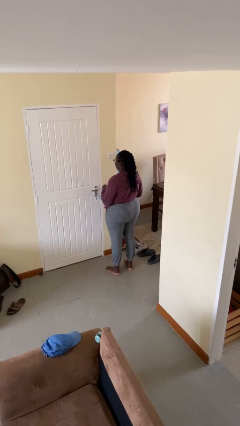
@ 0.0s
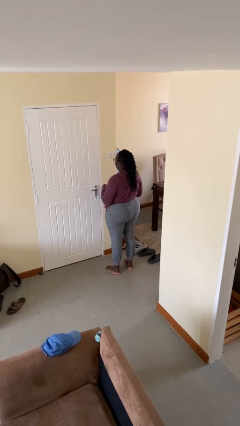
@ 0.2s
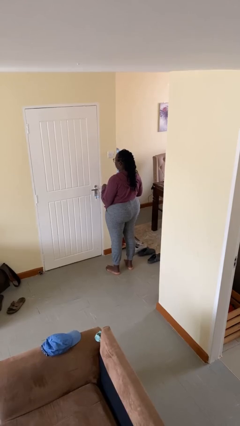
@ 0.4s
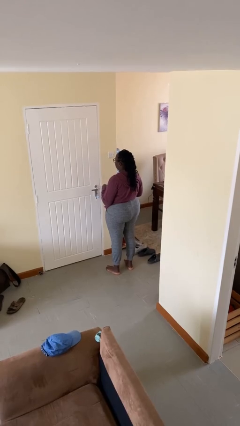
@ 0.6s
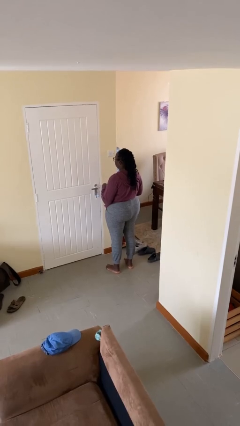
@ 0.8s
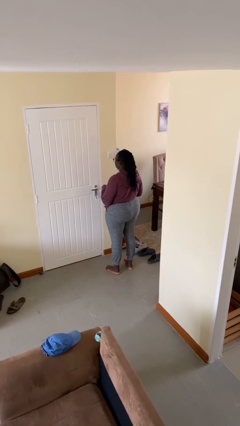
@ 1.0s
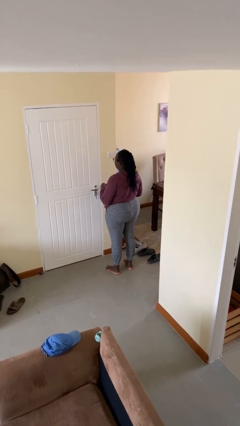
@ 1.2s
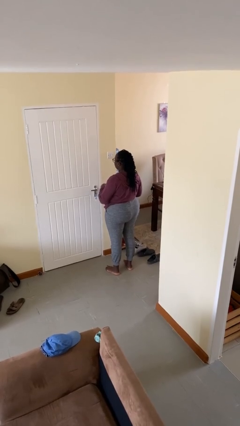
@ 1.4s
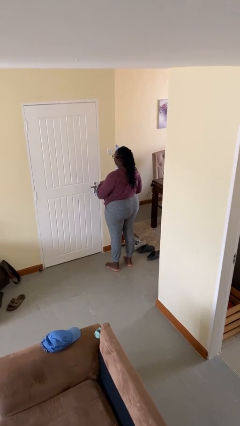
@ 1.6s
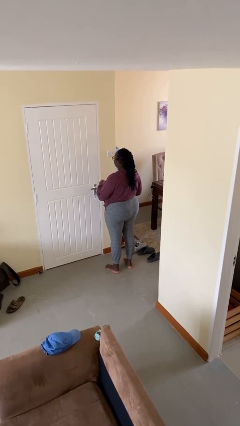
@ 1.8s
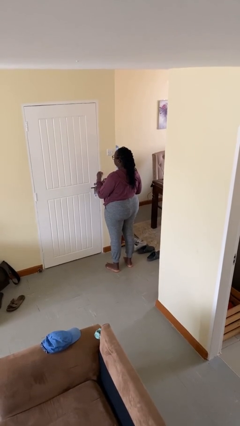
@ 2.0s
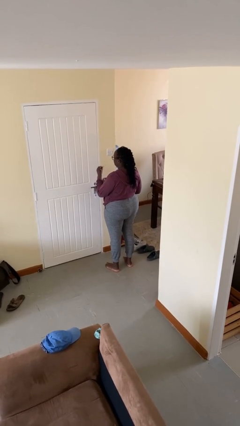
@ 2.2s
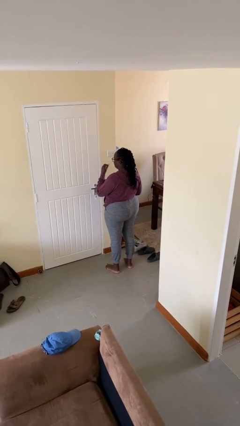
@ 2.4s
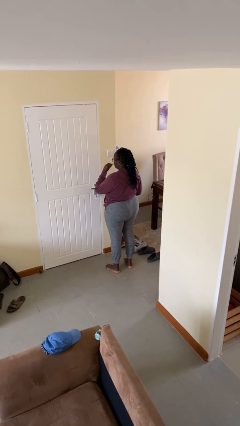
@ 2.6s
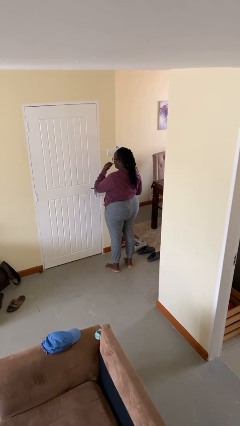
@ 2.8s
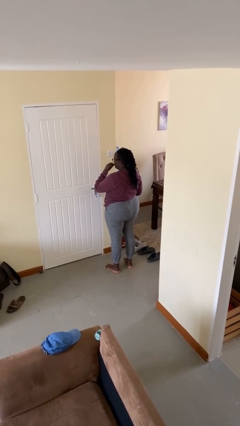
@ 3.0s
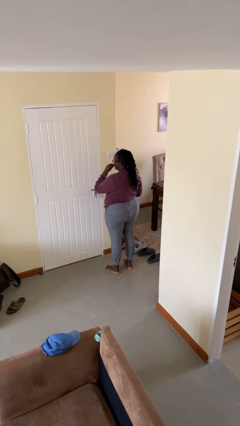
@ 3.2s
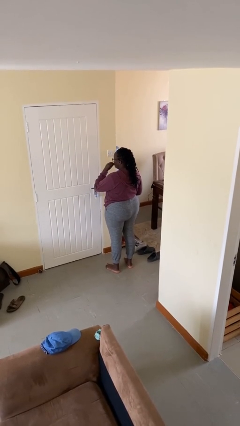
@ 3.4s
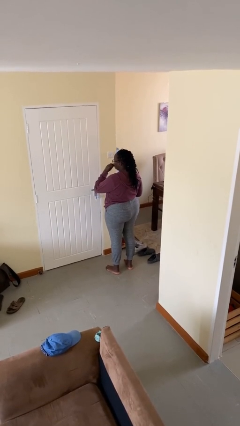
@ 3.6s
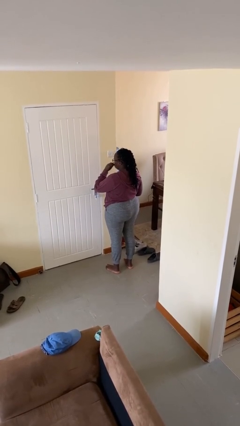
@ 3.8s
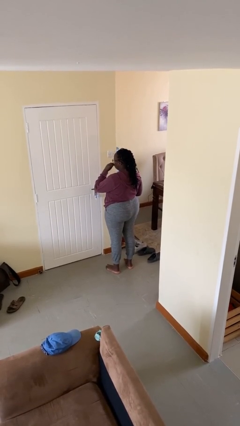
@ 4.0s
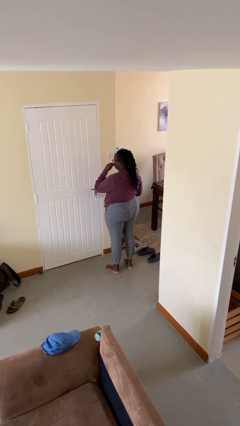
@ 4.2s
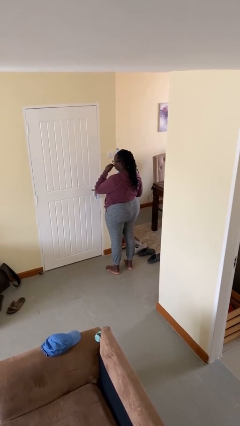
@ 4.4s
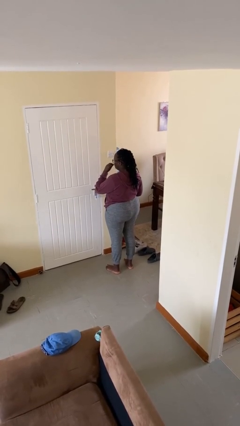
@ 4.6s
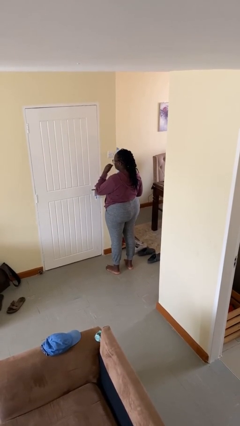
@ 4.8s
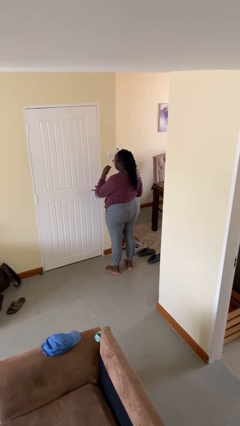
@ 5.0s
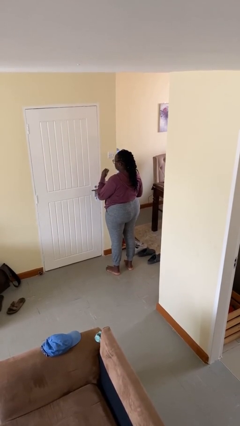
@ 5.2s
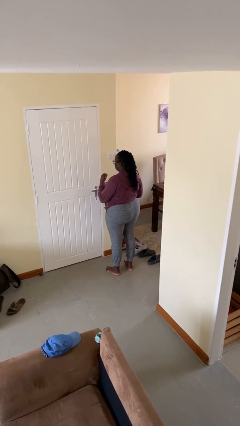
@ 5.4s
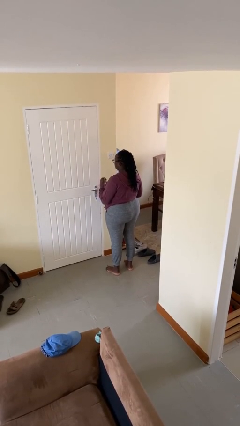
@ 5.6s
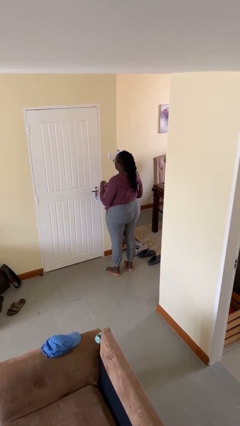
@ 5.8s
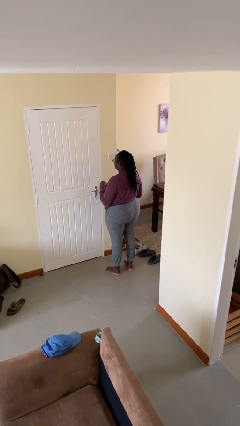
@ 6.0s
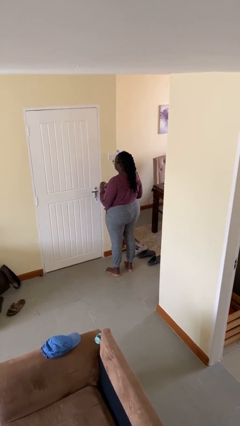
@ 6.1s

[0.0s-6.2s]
person eats snack from bag

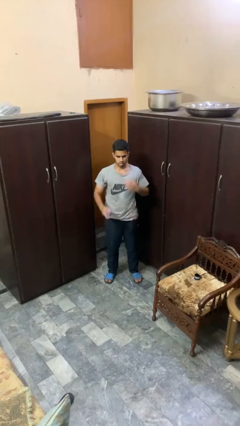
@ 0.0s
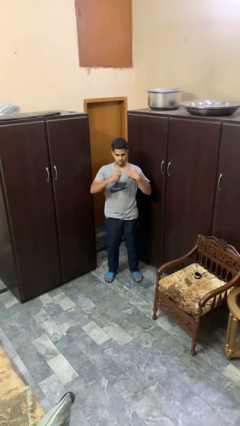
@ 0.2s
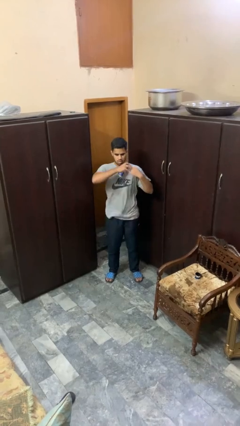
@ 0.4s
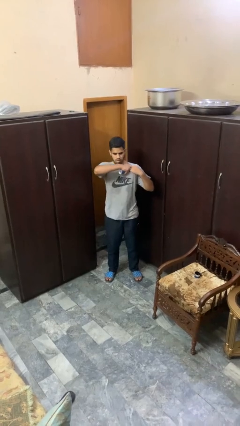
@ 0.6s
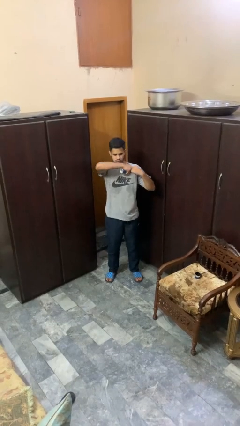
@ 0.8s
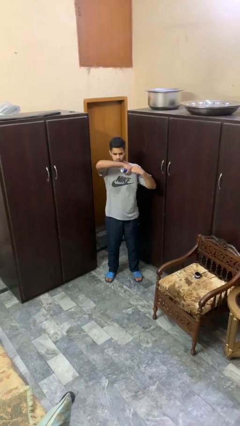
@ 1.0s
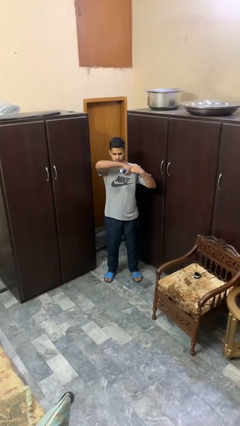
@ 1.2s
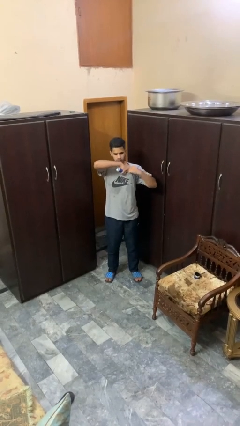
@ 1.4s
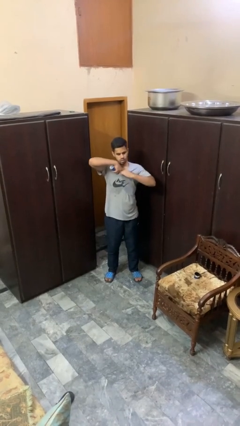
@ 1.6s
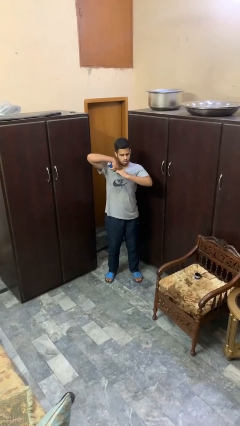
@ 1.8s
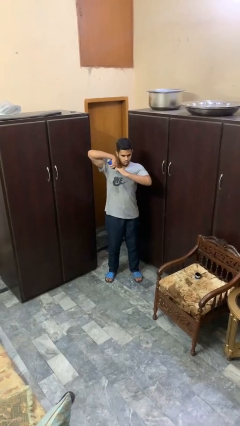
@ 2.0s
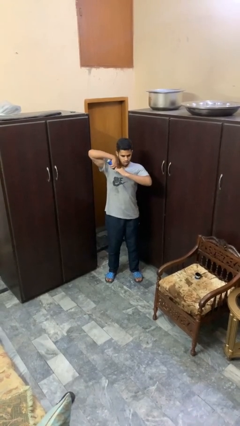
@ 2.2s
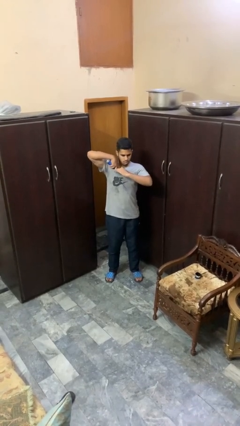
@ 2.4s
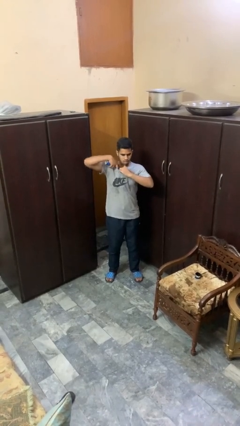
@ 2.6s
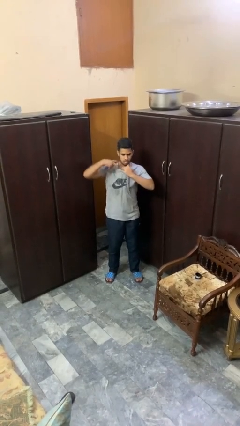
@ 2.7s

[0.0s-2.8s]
person applies deodorant

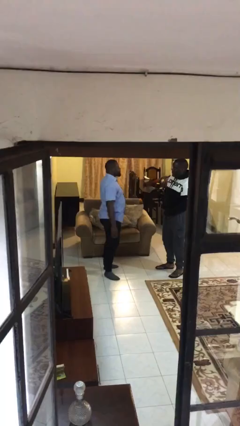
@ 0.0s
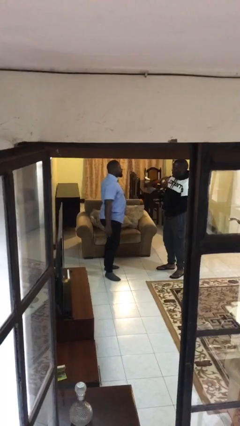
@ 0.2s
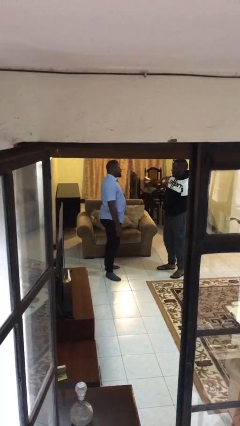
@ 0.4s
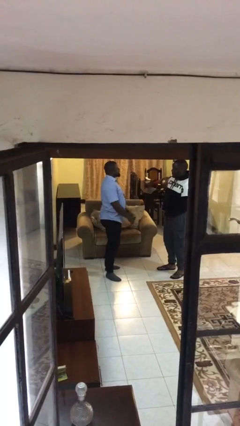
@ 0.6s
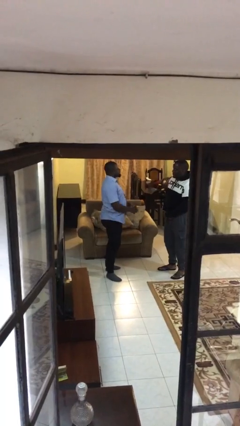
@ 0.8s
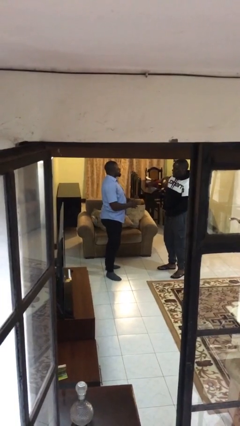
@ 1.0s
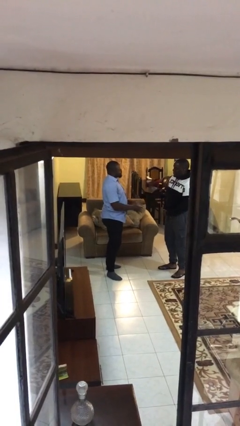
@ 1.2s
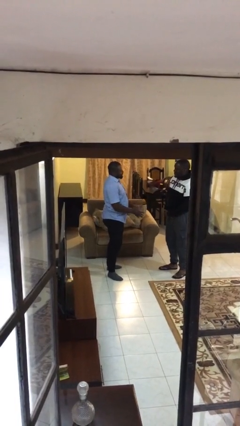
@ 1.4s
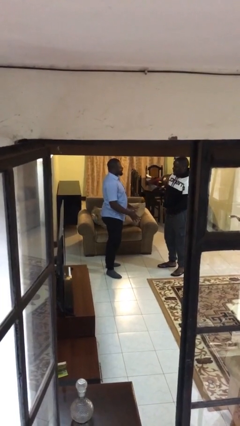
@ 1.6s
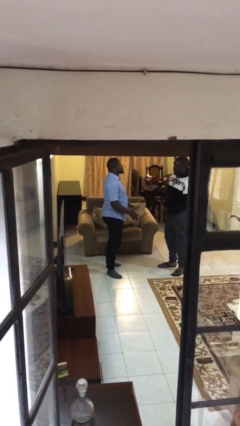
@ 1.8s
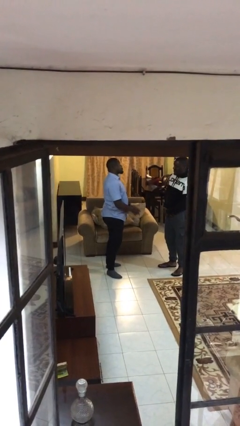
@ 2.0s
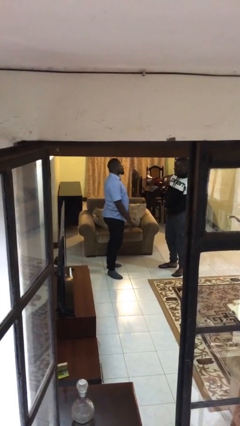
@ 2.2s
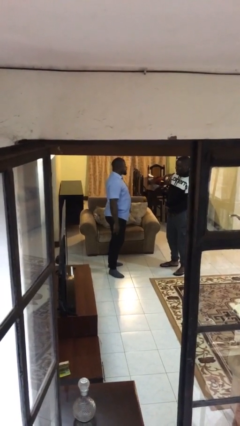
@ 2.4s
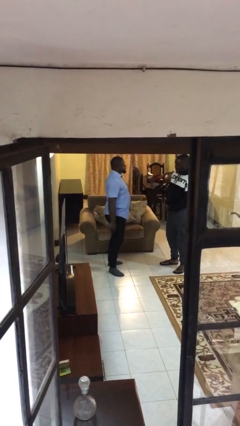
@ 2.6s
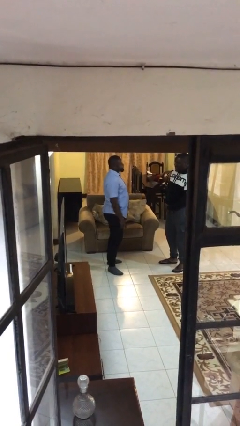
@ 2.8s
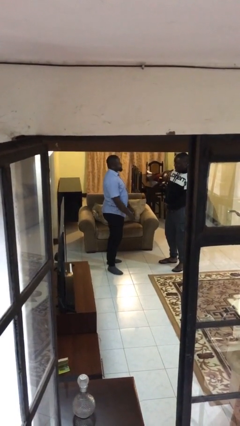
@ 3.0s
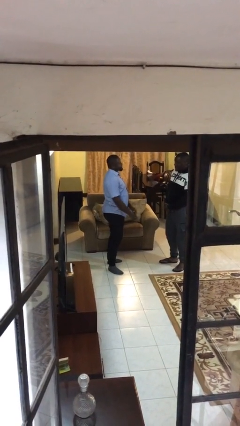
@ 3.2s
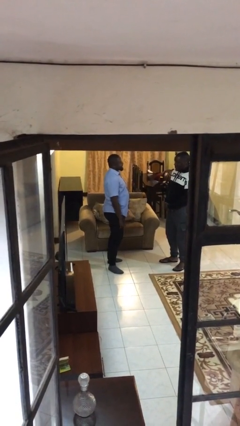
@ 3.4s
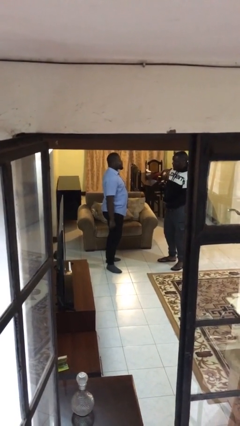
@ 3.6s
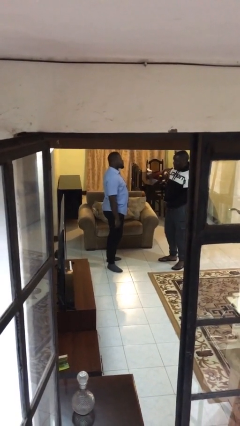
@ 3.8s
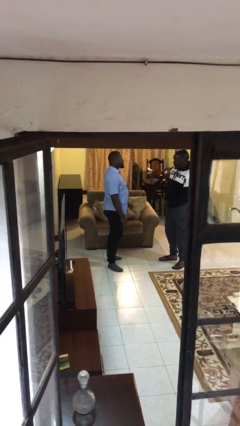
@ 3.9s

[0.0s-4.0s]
person talks to person

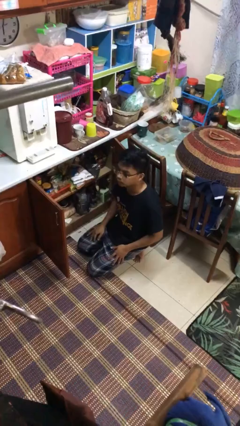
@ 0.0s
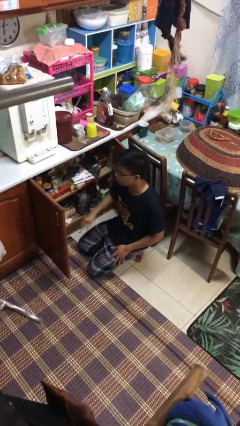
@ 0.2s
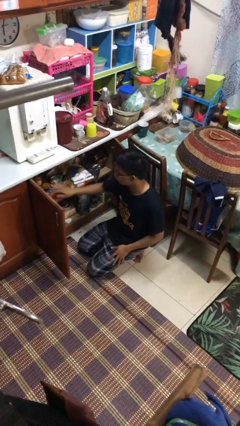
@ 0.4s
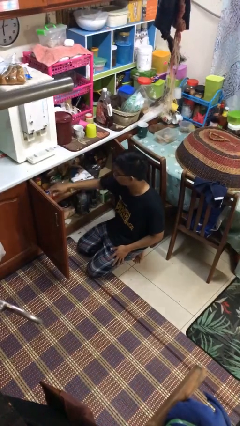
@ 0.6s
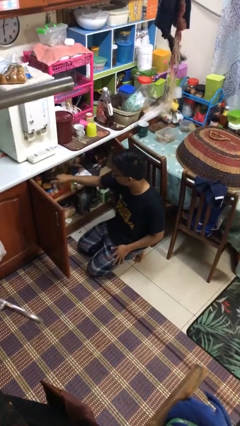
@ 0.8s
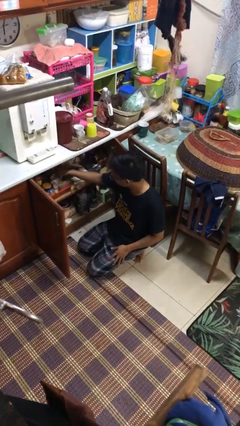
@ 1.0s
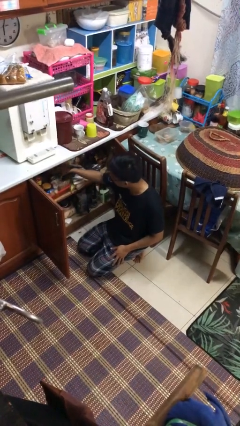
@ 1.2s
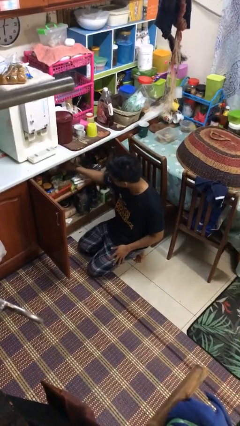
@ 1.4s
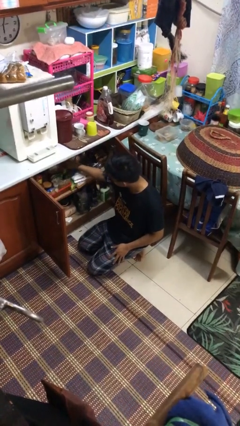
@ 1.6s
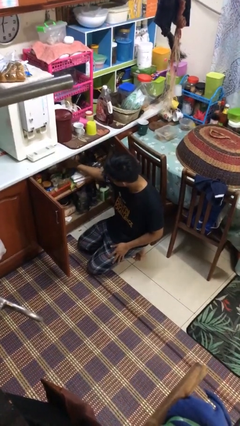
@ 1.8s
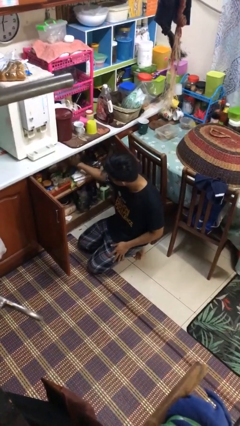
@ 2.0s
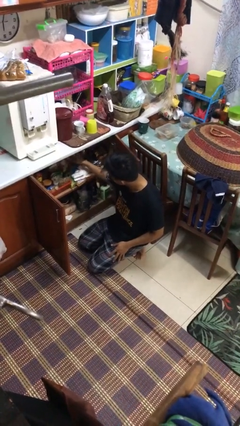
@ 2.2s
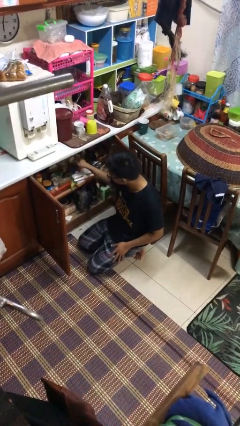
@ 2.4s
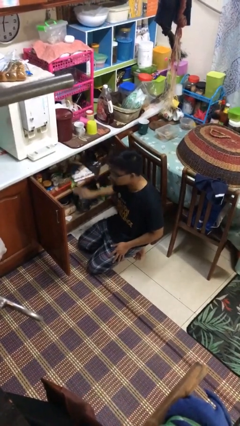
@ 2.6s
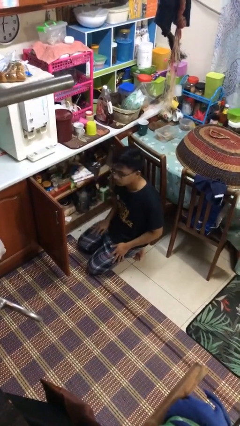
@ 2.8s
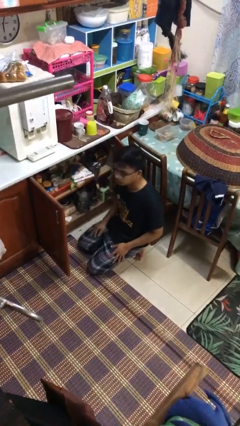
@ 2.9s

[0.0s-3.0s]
person searches in kitchen drawer

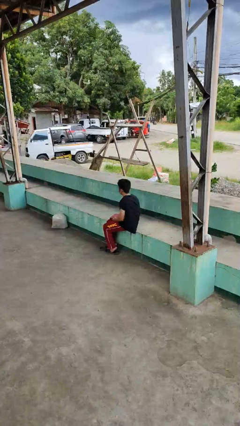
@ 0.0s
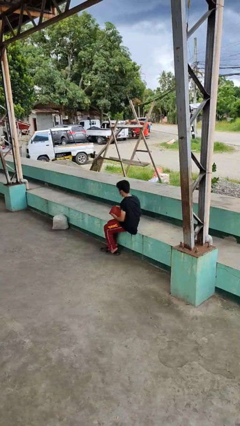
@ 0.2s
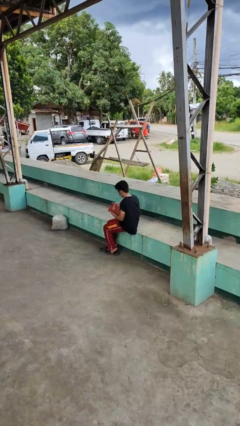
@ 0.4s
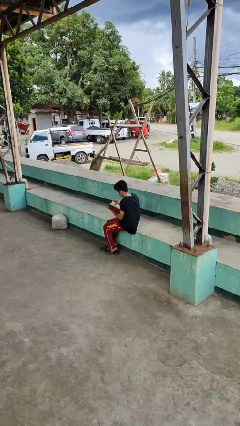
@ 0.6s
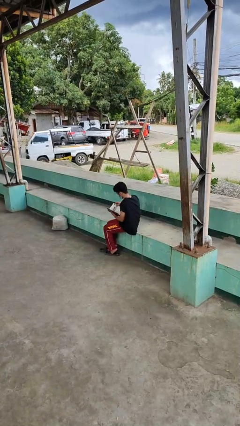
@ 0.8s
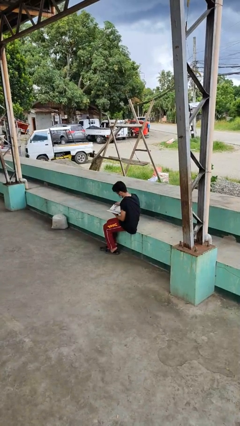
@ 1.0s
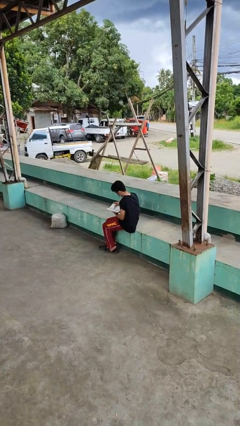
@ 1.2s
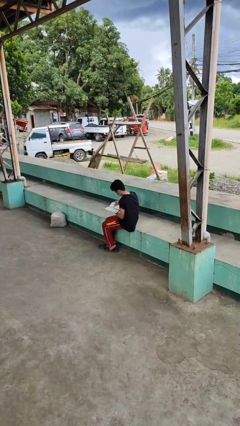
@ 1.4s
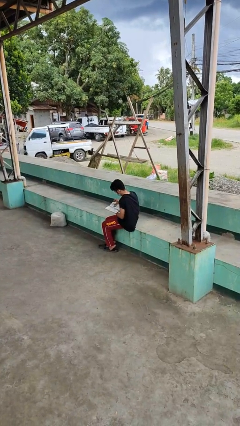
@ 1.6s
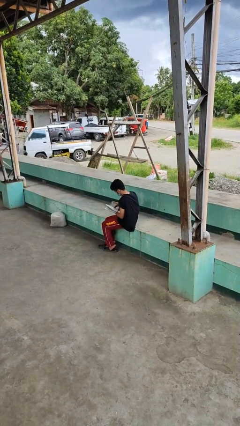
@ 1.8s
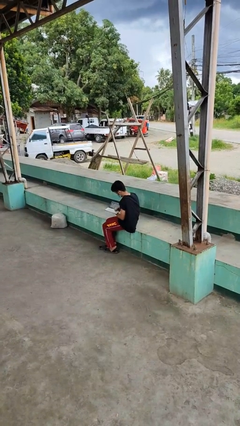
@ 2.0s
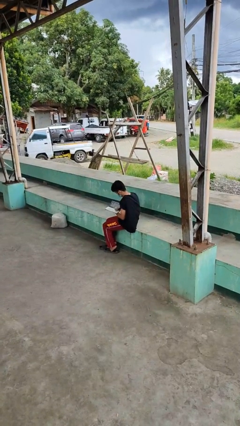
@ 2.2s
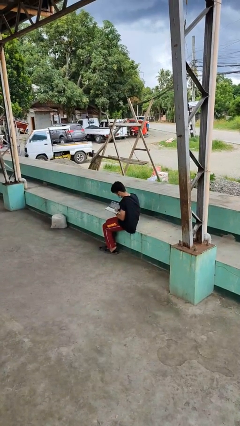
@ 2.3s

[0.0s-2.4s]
person reads book
